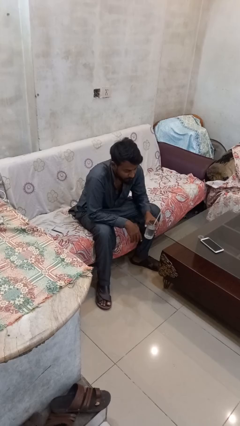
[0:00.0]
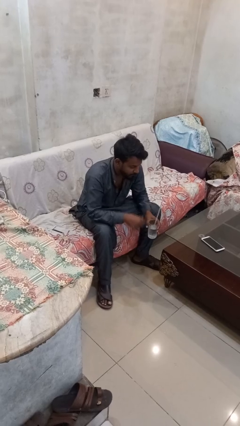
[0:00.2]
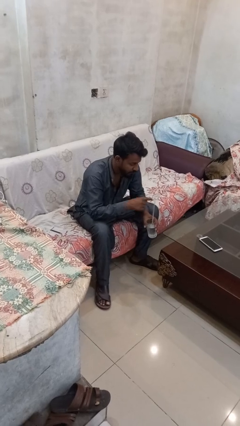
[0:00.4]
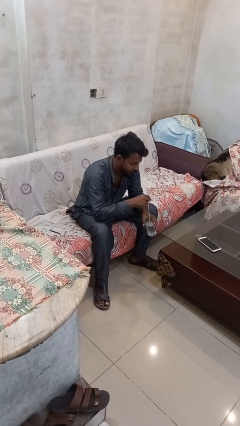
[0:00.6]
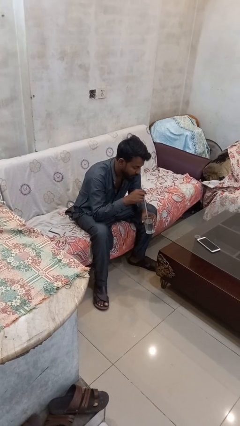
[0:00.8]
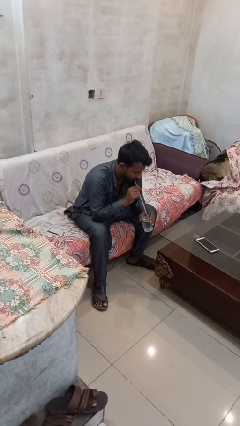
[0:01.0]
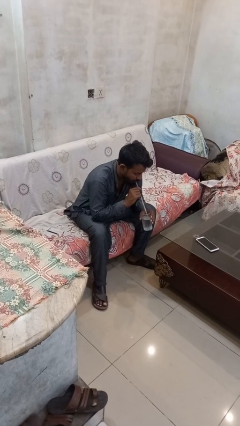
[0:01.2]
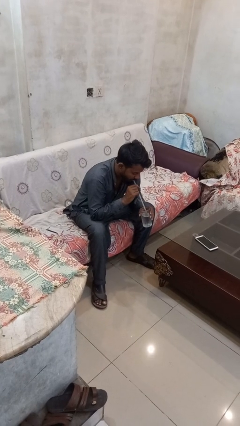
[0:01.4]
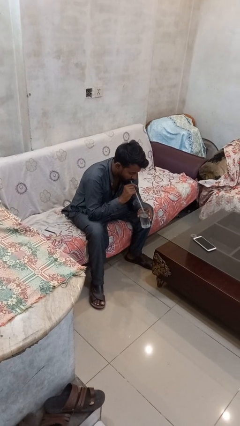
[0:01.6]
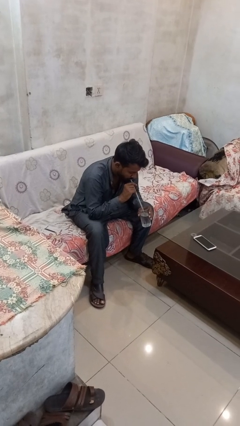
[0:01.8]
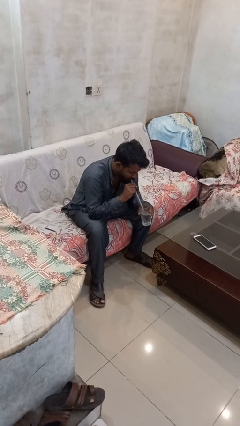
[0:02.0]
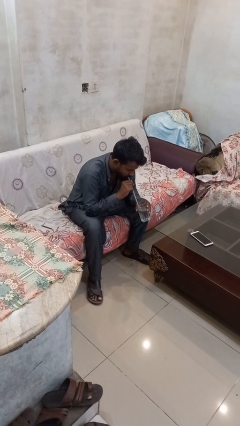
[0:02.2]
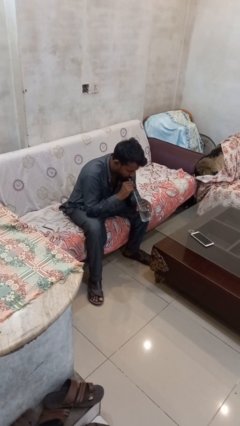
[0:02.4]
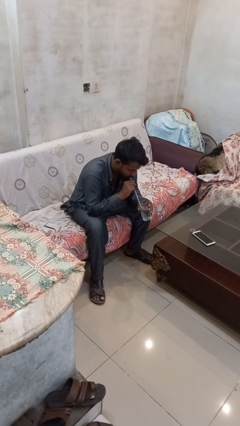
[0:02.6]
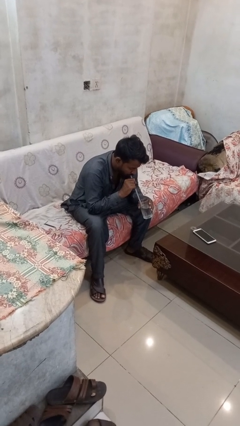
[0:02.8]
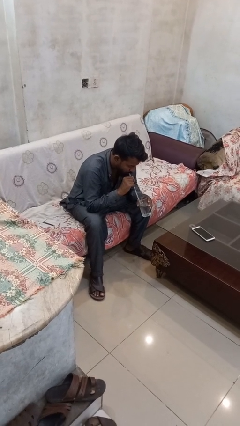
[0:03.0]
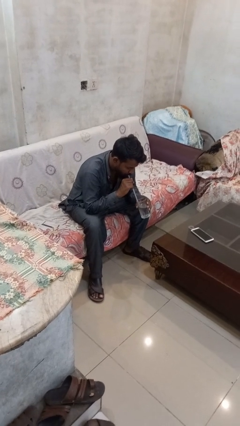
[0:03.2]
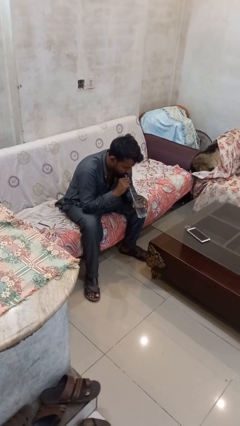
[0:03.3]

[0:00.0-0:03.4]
person drinks from straw

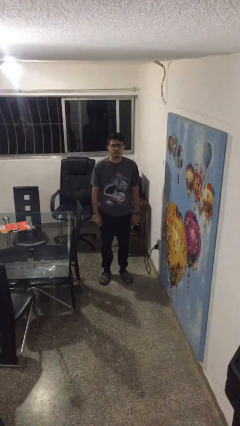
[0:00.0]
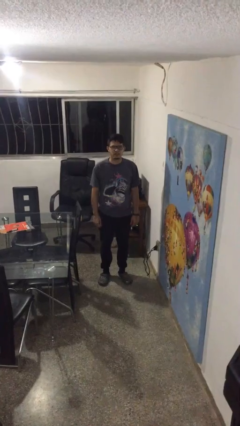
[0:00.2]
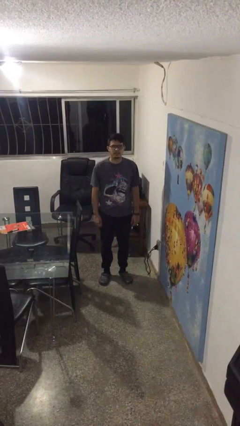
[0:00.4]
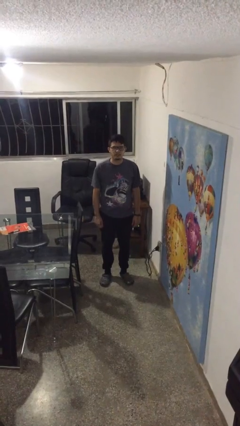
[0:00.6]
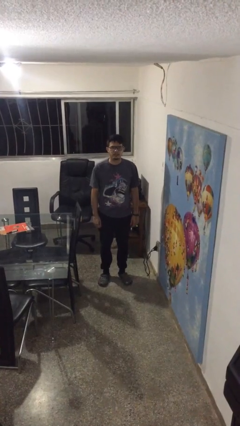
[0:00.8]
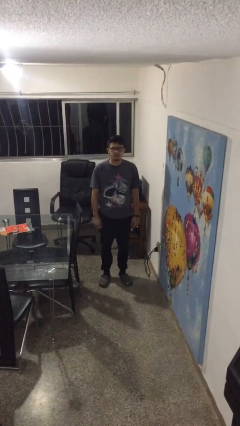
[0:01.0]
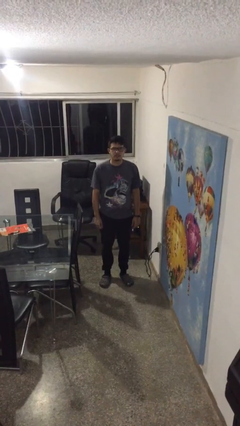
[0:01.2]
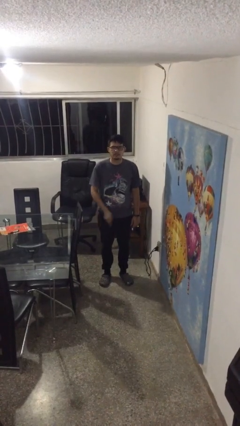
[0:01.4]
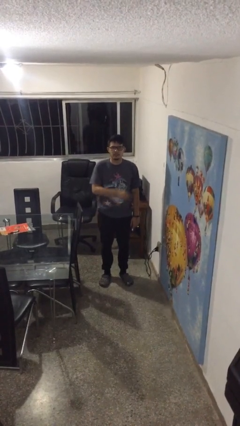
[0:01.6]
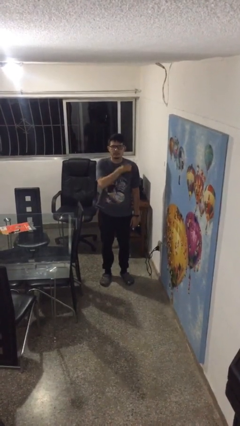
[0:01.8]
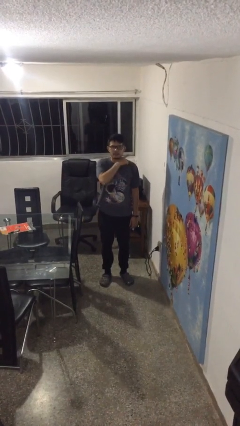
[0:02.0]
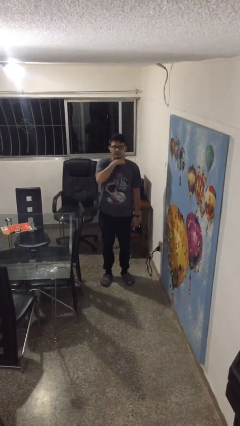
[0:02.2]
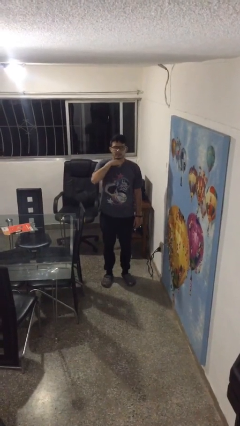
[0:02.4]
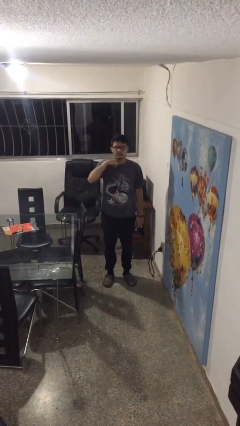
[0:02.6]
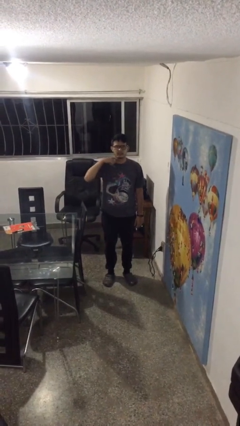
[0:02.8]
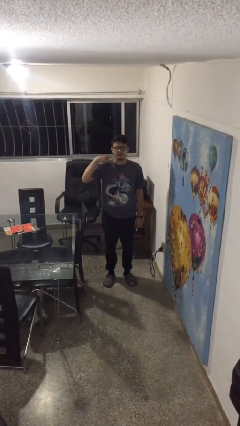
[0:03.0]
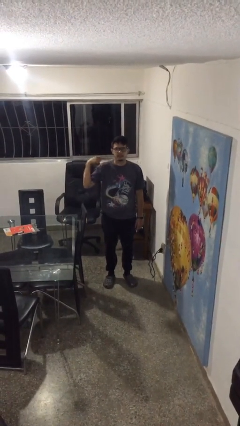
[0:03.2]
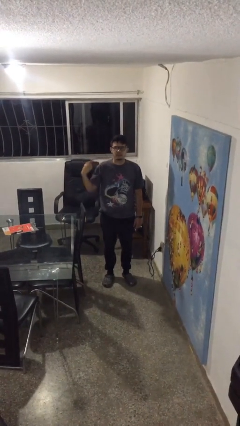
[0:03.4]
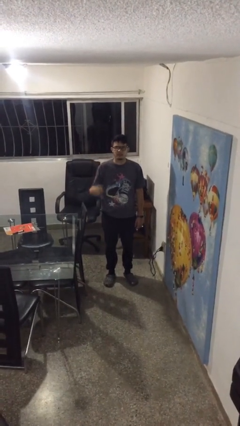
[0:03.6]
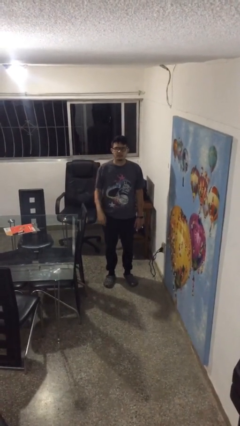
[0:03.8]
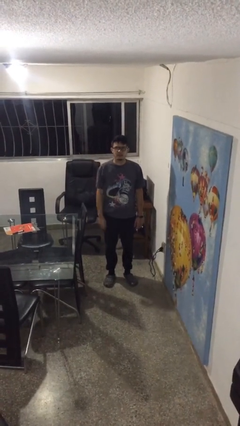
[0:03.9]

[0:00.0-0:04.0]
person gestures cut

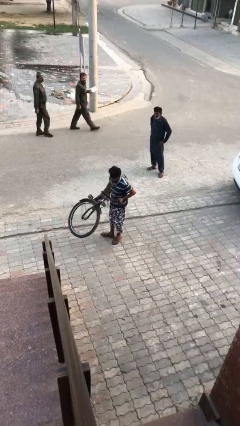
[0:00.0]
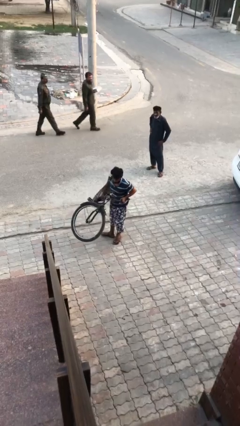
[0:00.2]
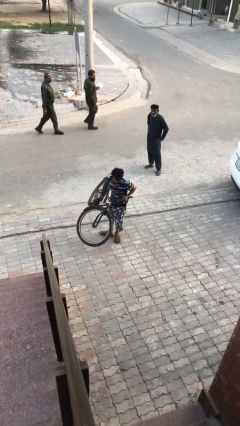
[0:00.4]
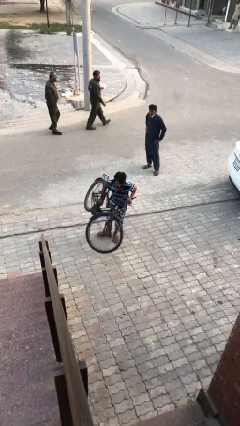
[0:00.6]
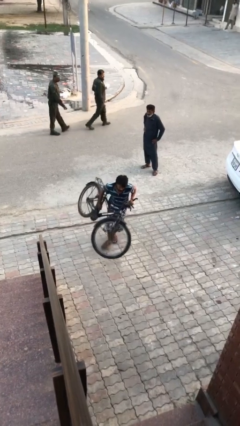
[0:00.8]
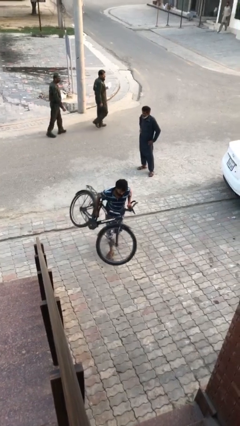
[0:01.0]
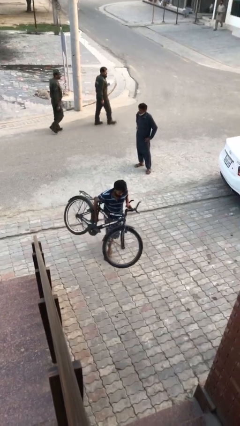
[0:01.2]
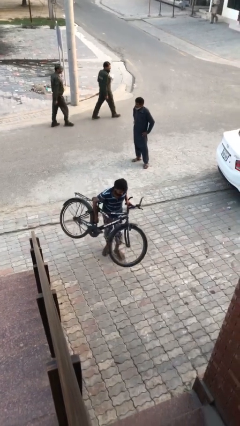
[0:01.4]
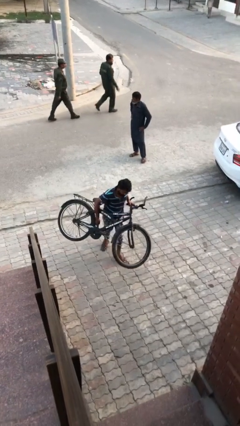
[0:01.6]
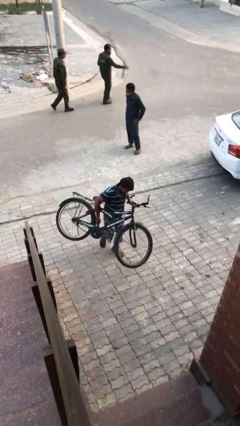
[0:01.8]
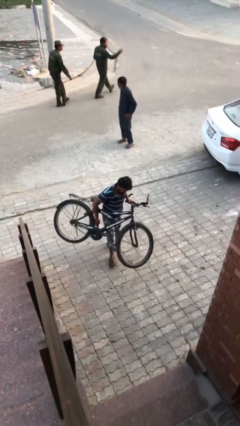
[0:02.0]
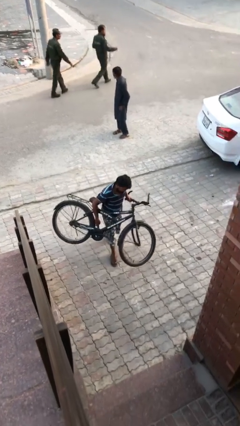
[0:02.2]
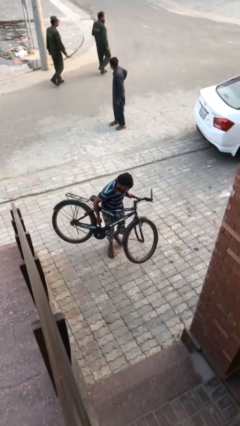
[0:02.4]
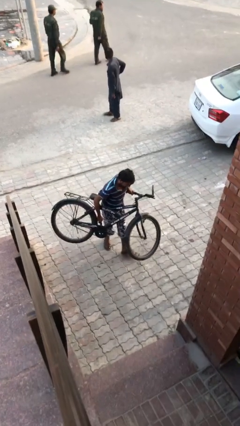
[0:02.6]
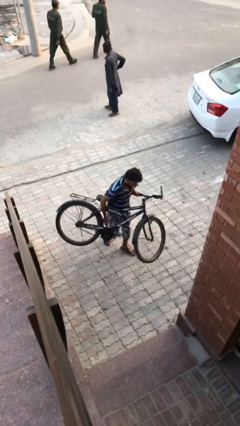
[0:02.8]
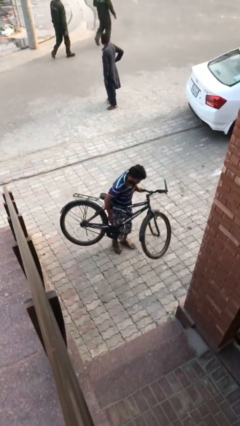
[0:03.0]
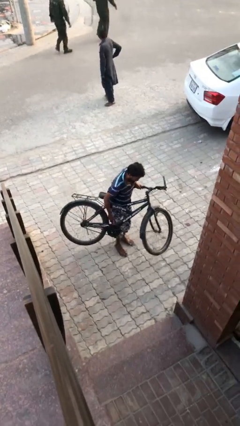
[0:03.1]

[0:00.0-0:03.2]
person carries heavy object

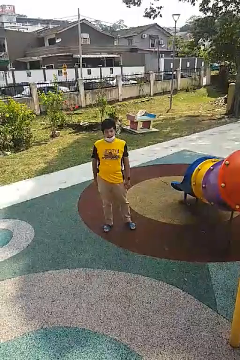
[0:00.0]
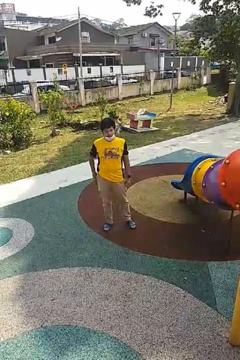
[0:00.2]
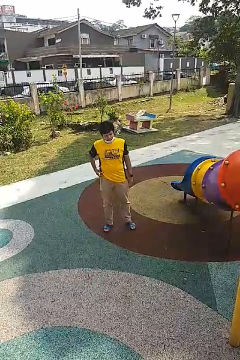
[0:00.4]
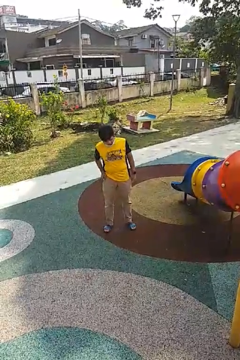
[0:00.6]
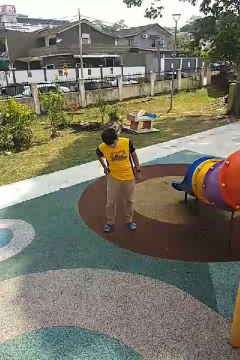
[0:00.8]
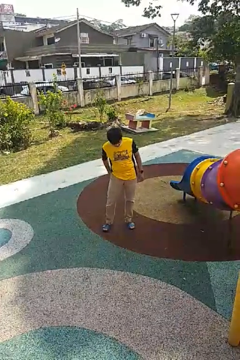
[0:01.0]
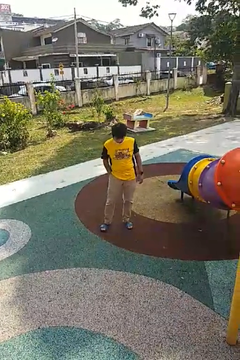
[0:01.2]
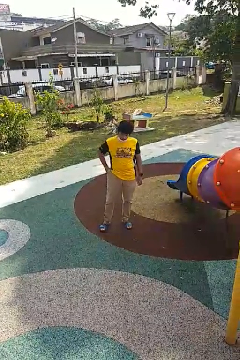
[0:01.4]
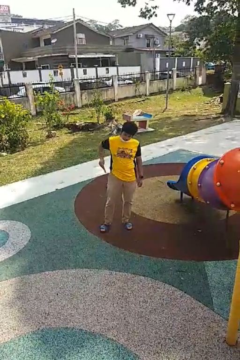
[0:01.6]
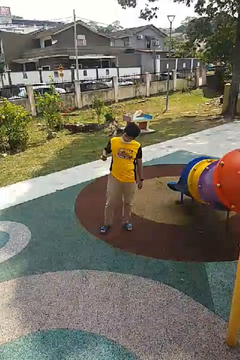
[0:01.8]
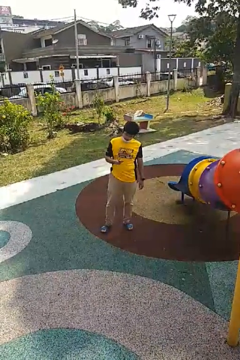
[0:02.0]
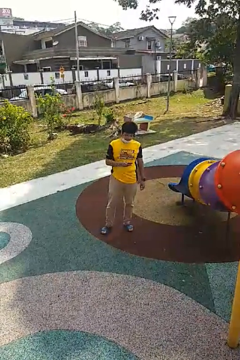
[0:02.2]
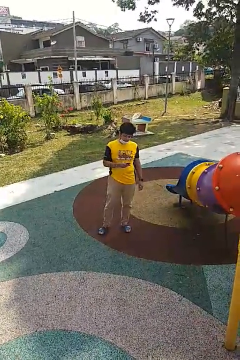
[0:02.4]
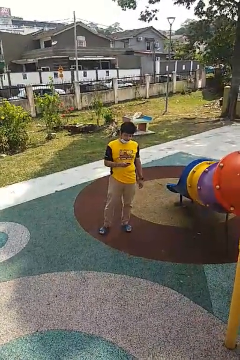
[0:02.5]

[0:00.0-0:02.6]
person takes phone from pocket

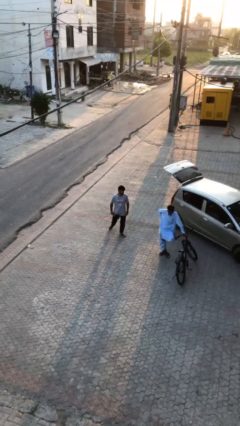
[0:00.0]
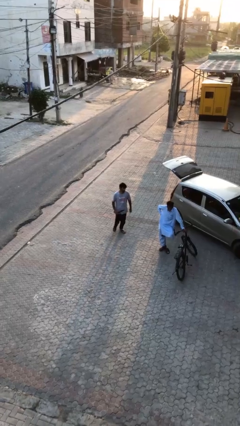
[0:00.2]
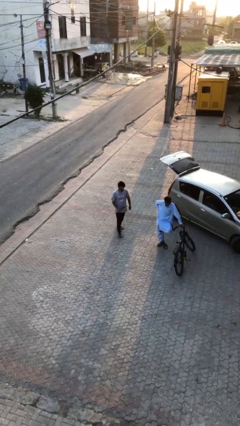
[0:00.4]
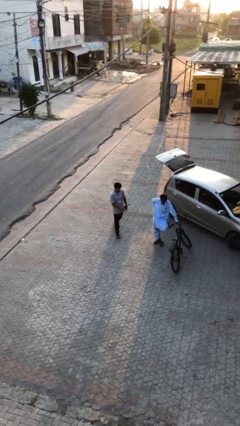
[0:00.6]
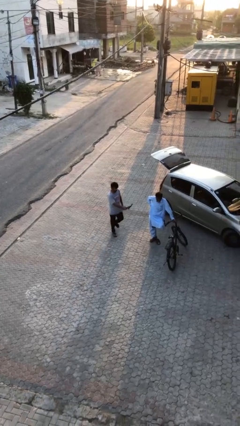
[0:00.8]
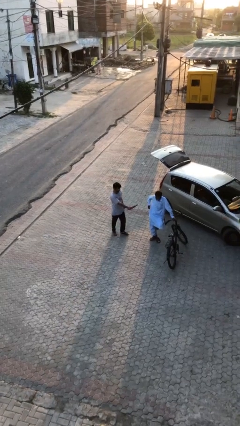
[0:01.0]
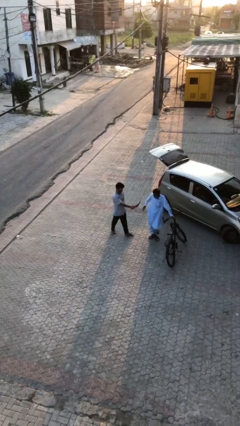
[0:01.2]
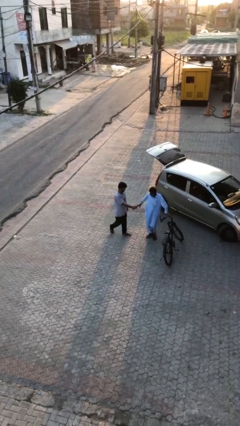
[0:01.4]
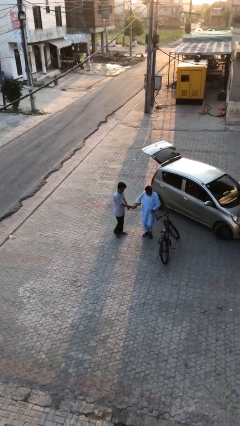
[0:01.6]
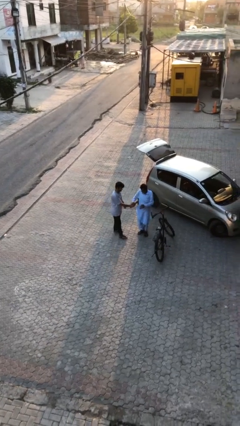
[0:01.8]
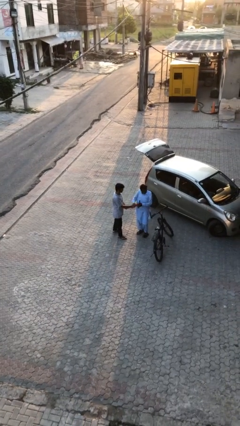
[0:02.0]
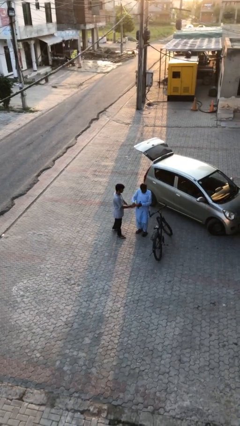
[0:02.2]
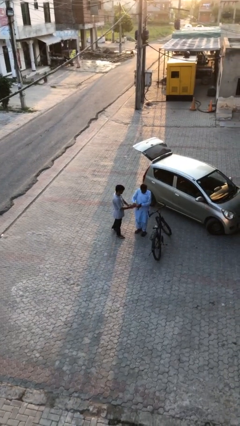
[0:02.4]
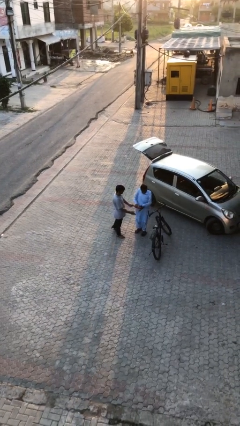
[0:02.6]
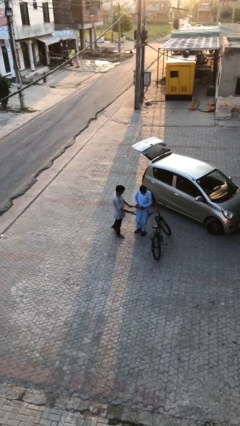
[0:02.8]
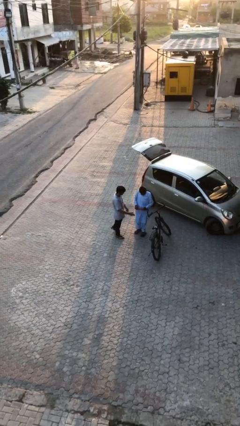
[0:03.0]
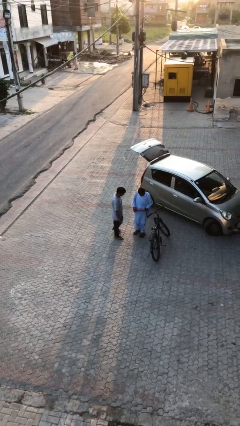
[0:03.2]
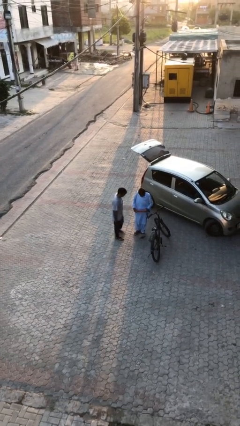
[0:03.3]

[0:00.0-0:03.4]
person transfers object to person

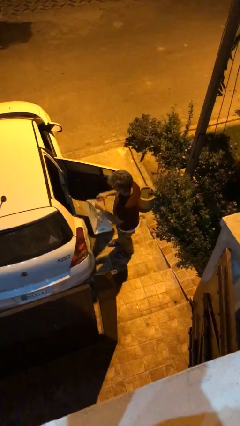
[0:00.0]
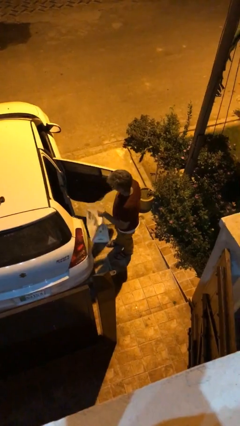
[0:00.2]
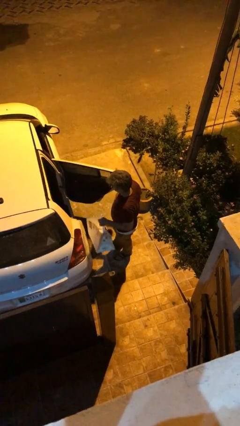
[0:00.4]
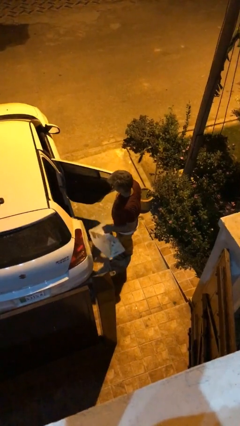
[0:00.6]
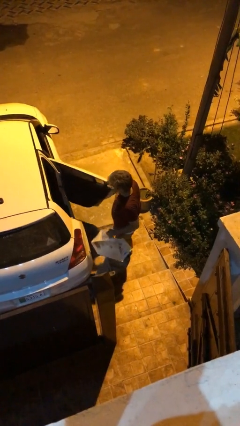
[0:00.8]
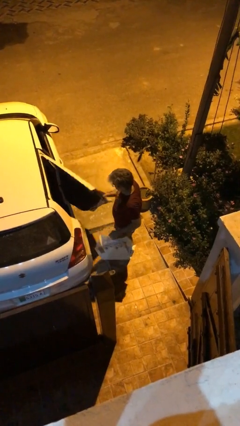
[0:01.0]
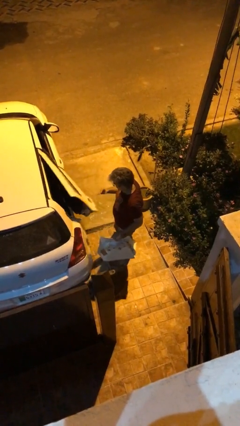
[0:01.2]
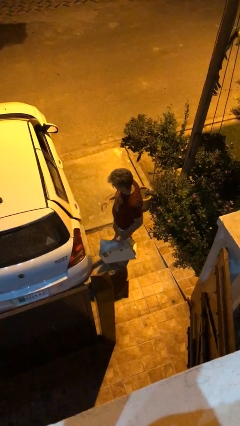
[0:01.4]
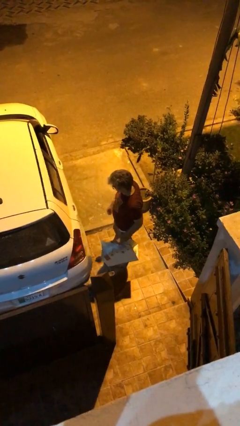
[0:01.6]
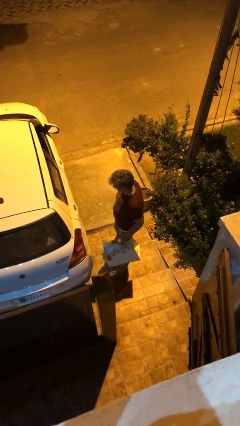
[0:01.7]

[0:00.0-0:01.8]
person closes car door
